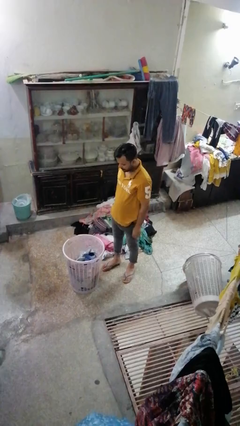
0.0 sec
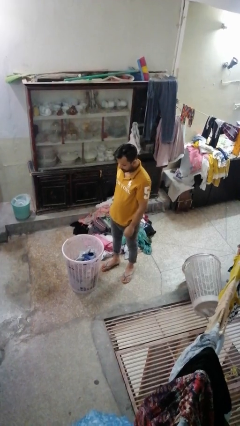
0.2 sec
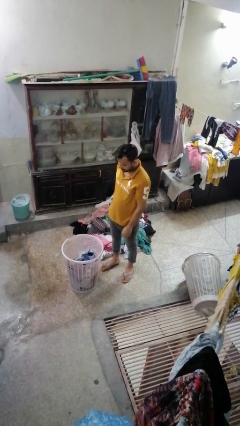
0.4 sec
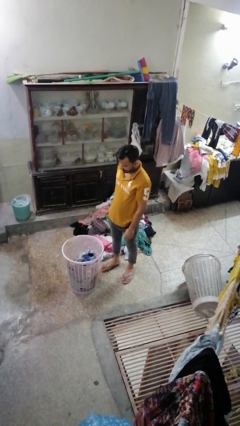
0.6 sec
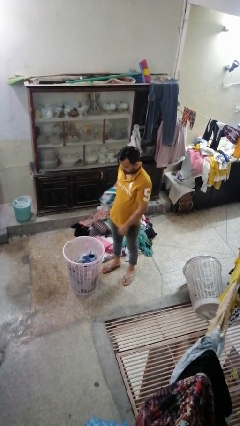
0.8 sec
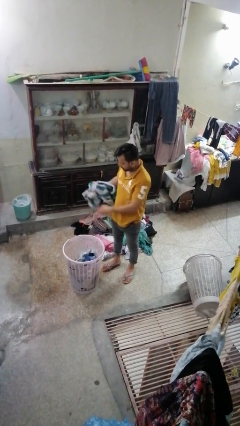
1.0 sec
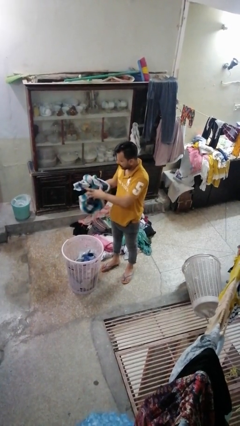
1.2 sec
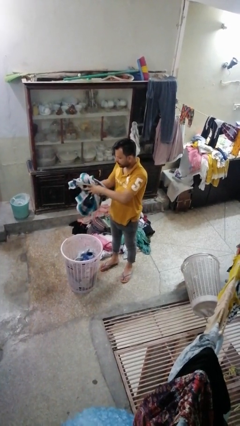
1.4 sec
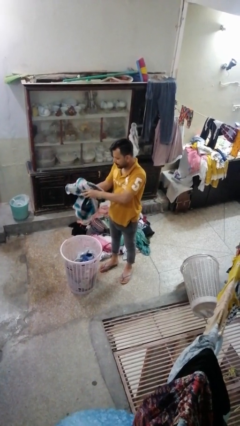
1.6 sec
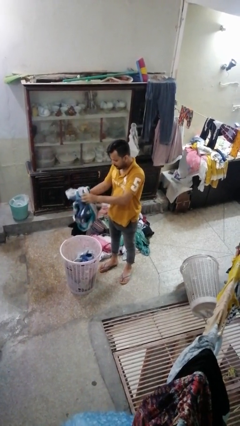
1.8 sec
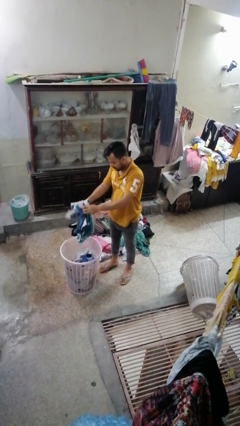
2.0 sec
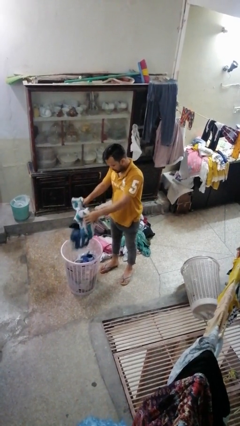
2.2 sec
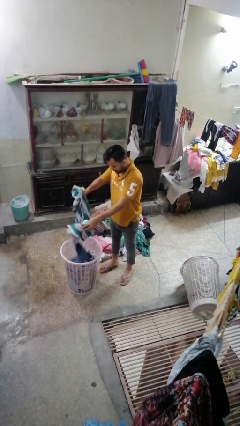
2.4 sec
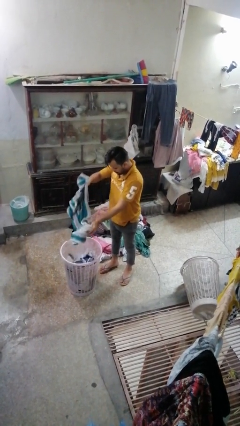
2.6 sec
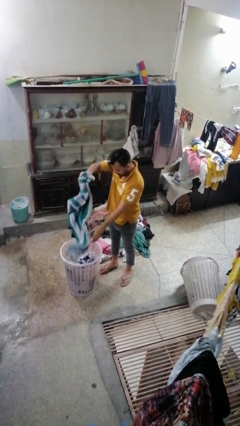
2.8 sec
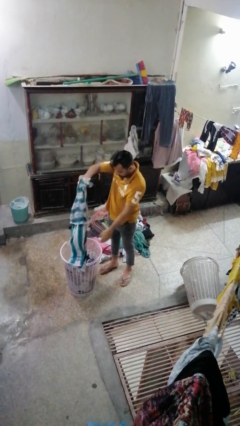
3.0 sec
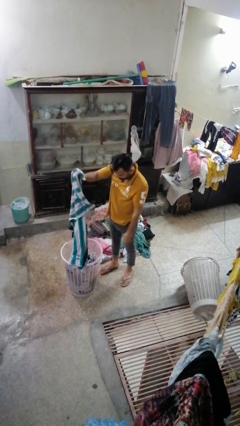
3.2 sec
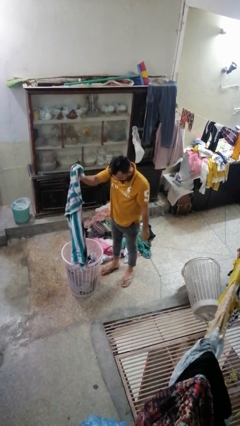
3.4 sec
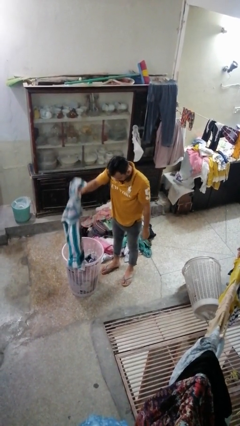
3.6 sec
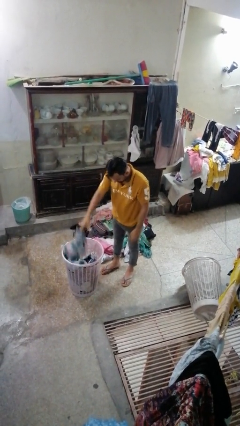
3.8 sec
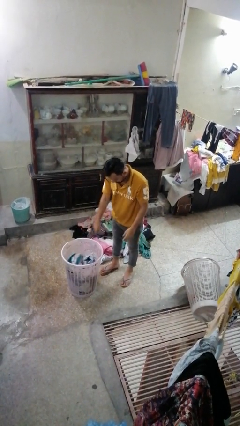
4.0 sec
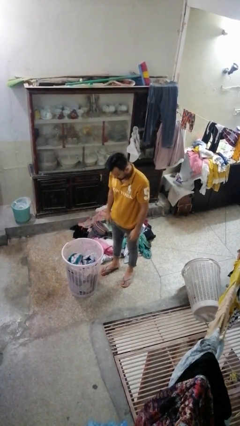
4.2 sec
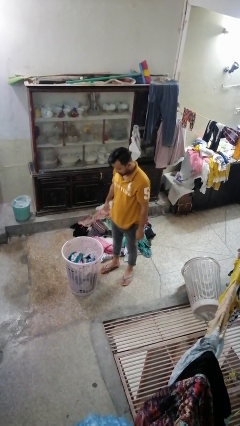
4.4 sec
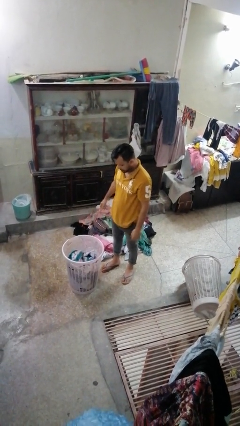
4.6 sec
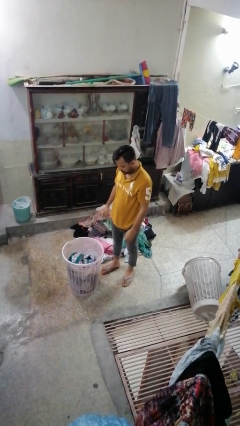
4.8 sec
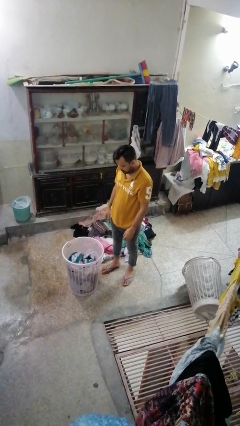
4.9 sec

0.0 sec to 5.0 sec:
person puts object into basket

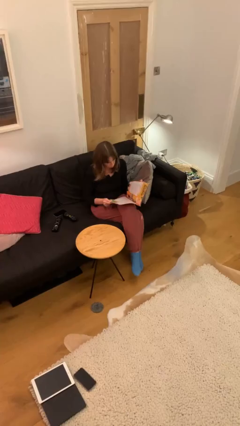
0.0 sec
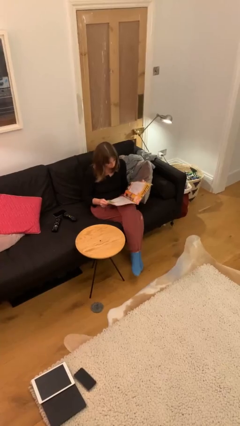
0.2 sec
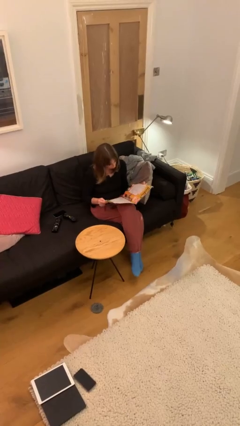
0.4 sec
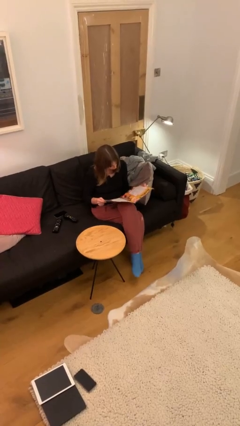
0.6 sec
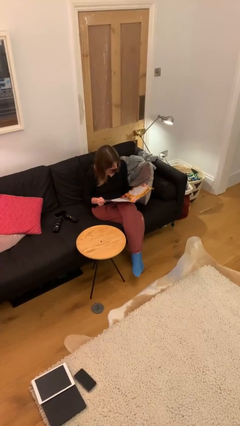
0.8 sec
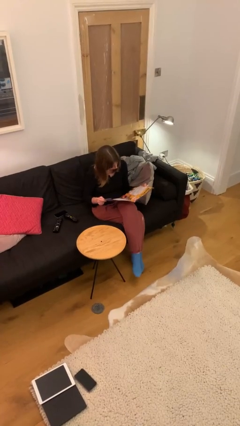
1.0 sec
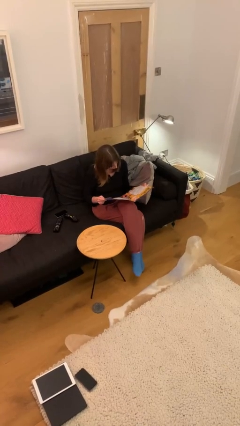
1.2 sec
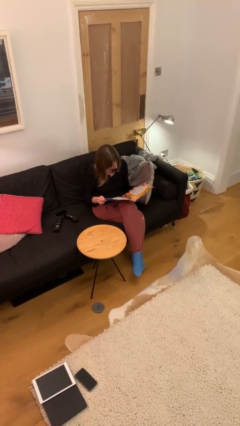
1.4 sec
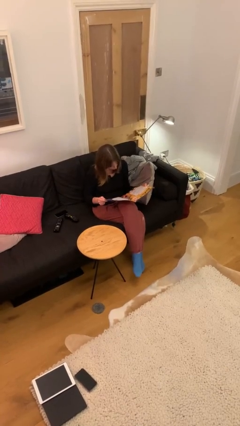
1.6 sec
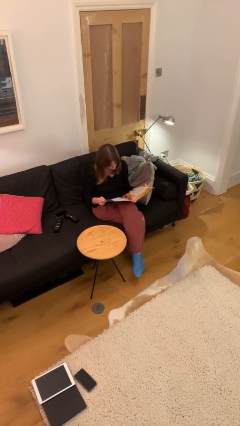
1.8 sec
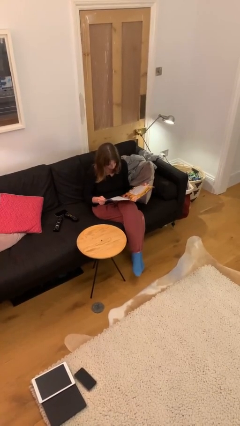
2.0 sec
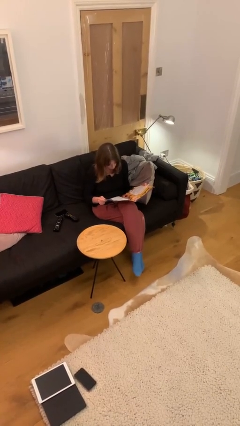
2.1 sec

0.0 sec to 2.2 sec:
person reads document

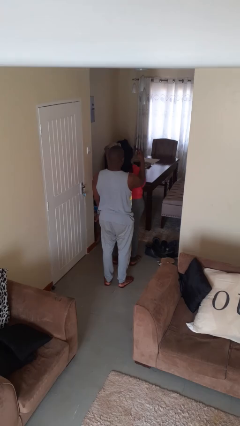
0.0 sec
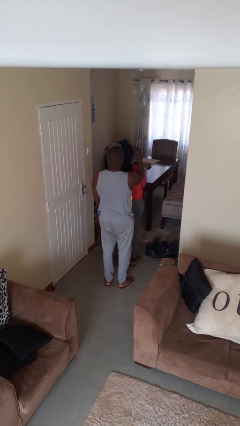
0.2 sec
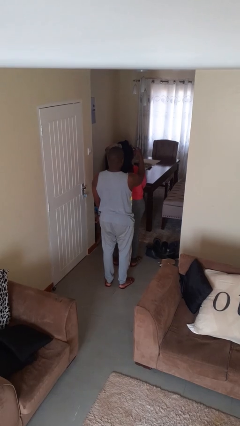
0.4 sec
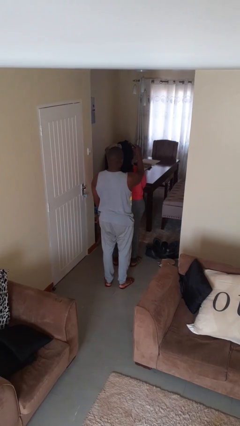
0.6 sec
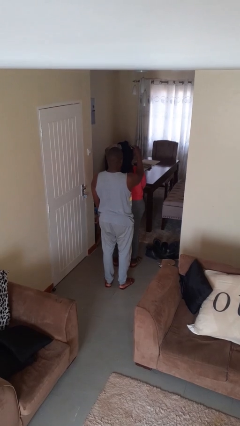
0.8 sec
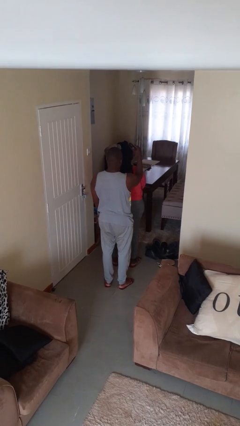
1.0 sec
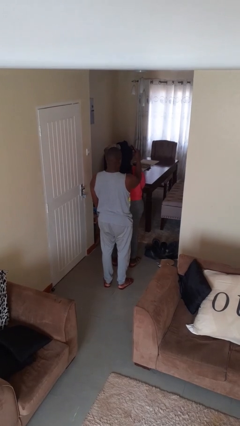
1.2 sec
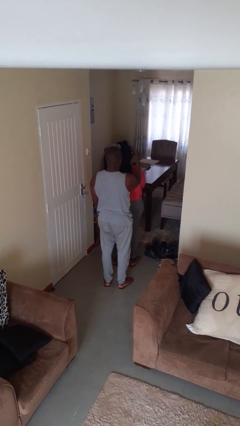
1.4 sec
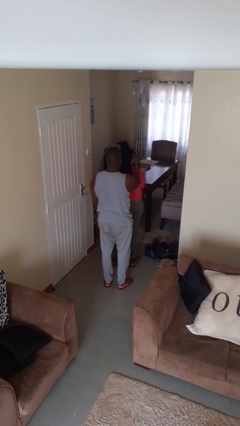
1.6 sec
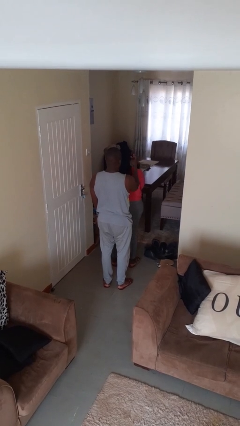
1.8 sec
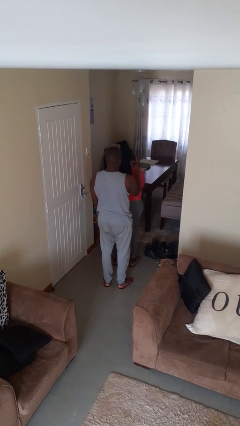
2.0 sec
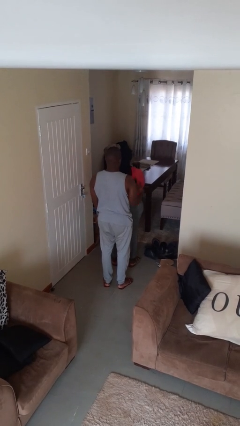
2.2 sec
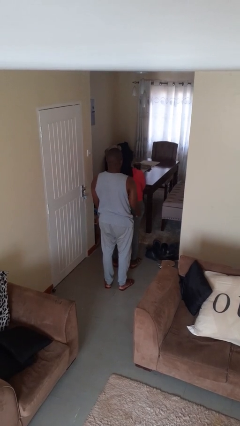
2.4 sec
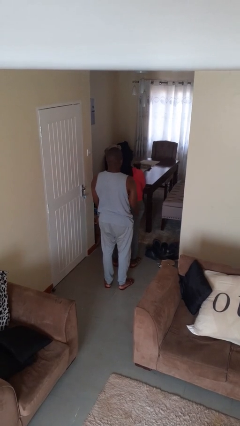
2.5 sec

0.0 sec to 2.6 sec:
person brushes hair of person

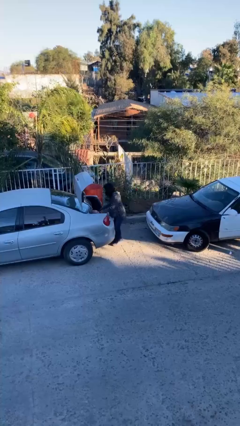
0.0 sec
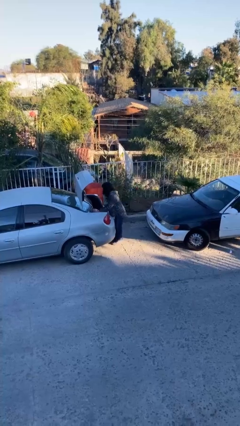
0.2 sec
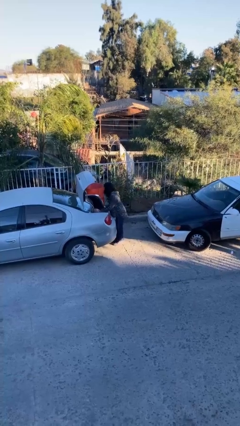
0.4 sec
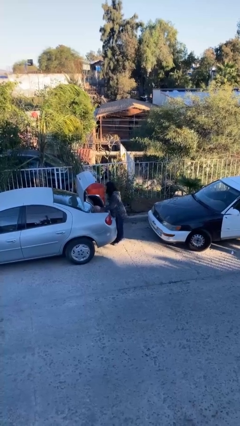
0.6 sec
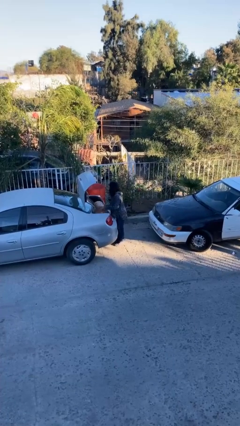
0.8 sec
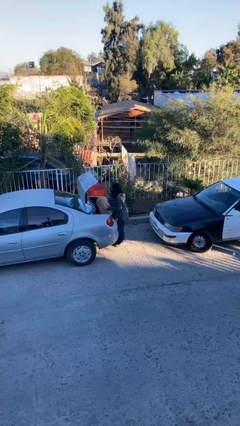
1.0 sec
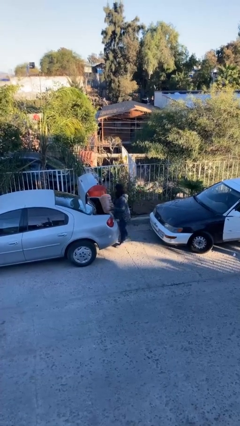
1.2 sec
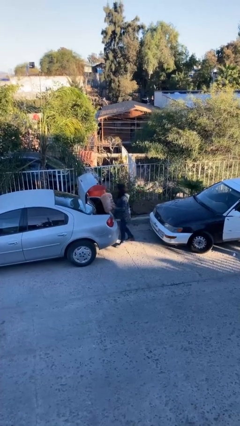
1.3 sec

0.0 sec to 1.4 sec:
person unloads car

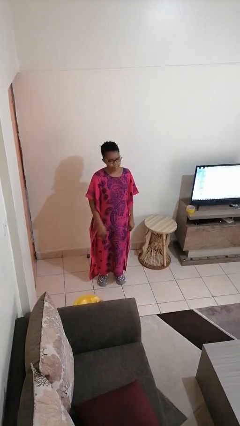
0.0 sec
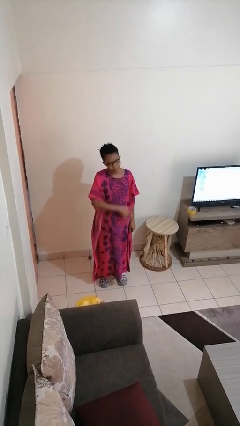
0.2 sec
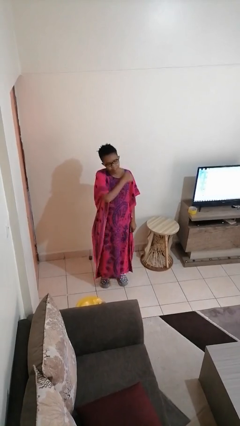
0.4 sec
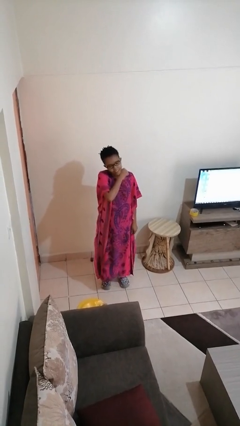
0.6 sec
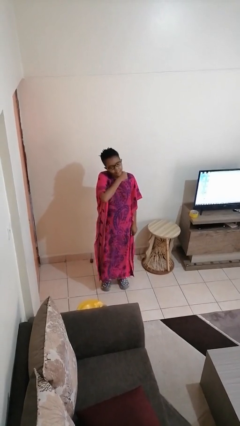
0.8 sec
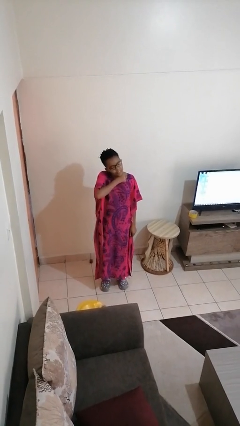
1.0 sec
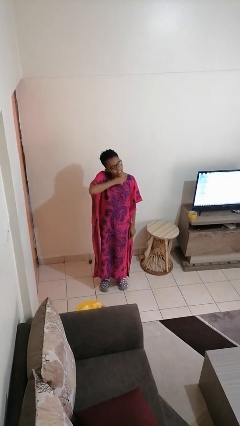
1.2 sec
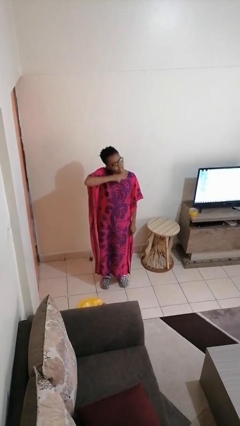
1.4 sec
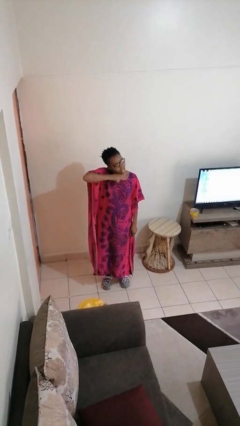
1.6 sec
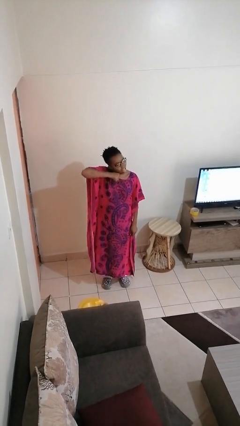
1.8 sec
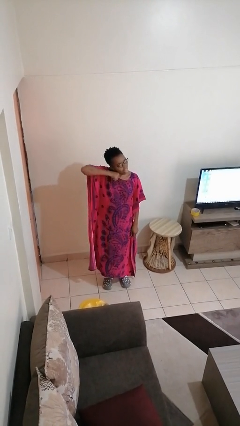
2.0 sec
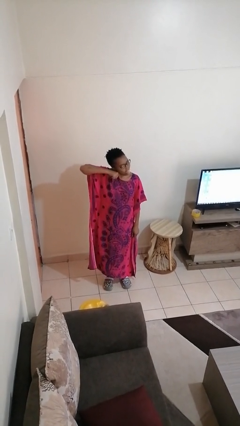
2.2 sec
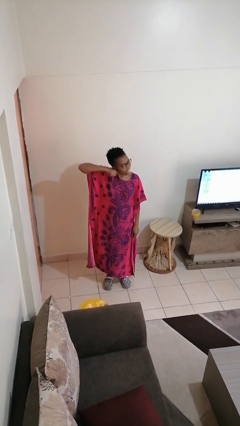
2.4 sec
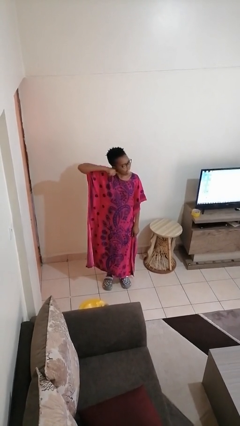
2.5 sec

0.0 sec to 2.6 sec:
person gestures cut

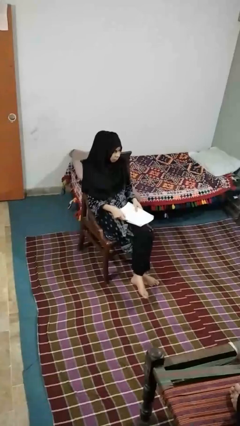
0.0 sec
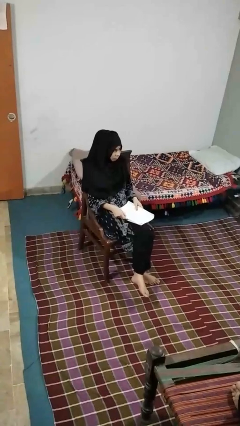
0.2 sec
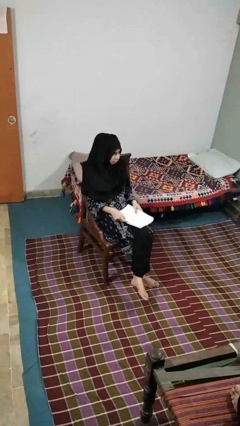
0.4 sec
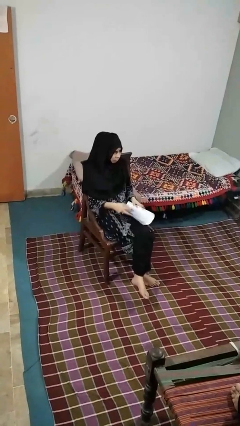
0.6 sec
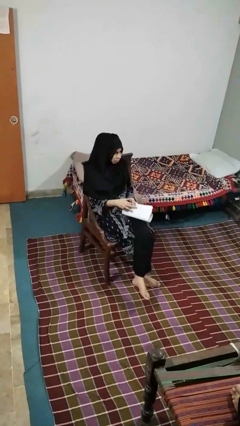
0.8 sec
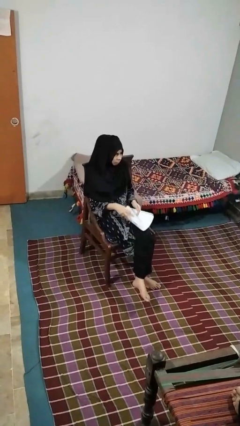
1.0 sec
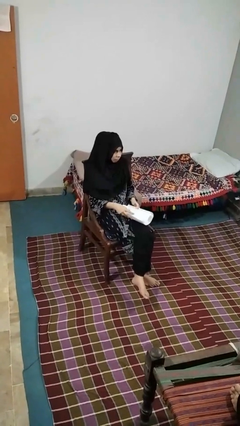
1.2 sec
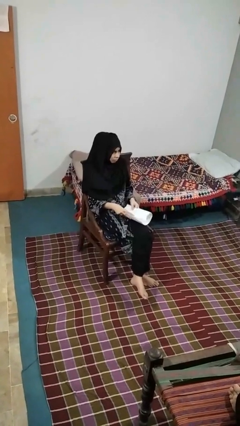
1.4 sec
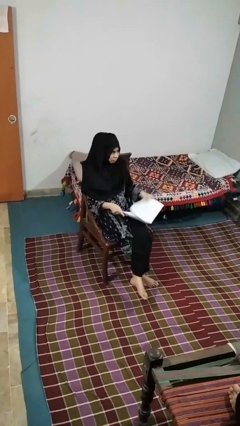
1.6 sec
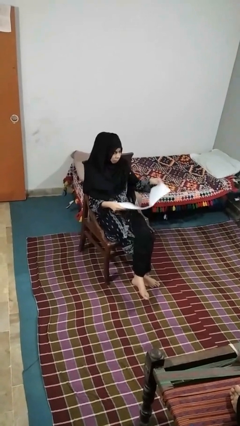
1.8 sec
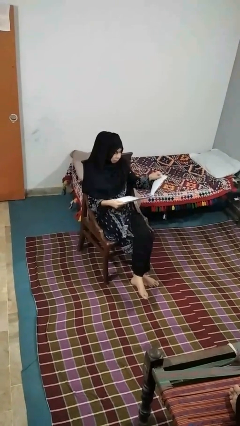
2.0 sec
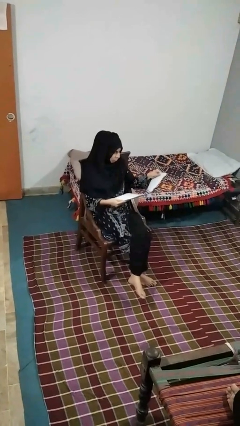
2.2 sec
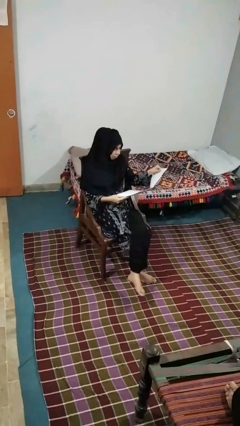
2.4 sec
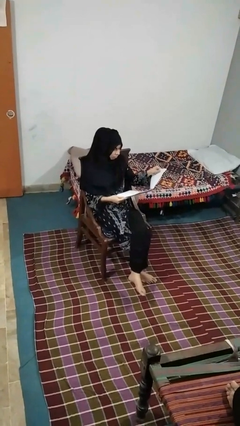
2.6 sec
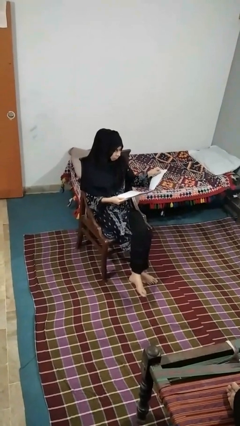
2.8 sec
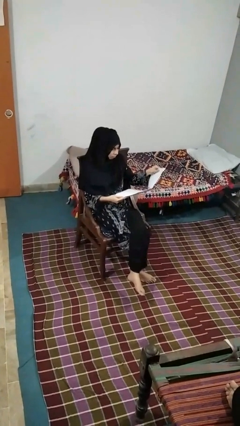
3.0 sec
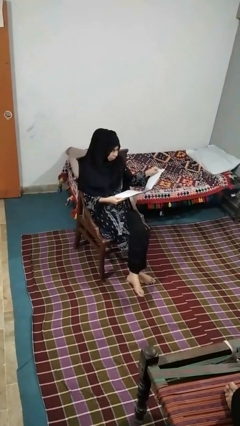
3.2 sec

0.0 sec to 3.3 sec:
person reads newspaper

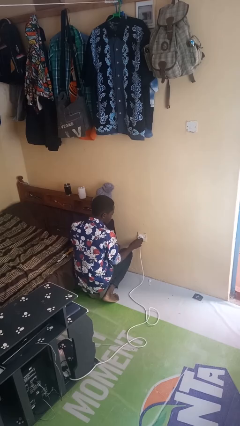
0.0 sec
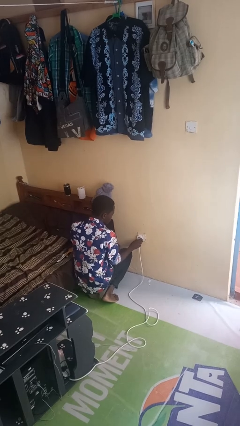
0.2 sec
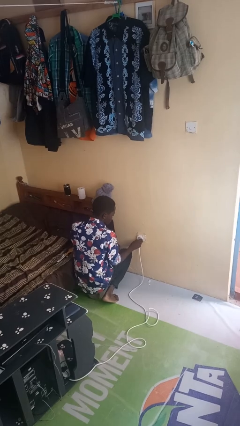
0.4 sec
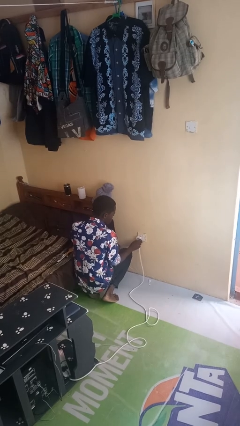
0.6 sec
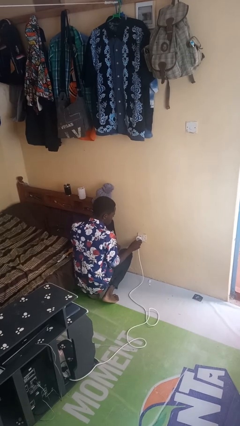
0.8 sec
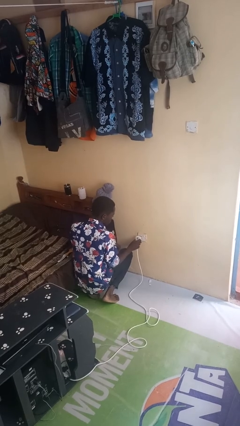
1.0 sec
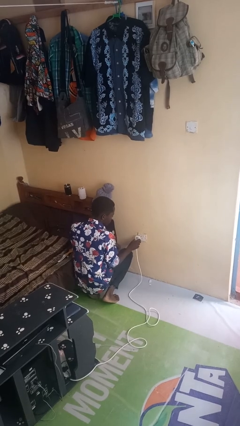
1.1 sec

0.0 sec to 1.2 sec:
person unplugs from electrical socket
